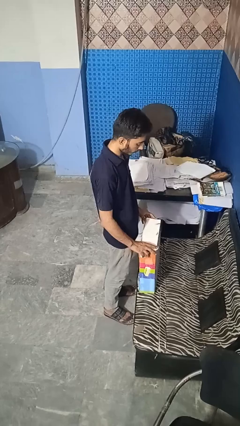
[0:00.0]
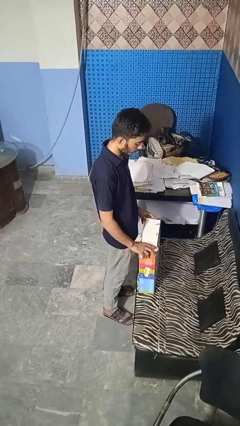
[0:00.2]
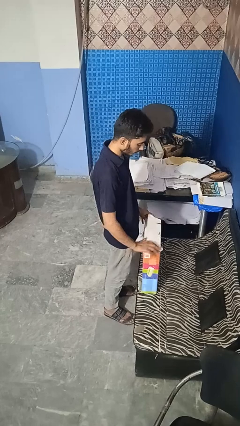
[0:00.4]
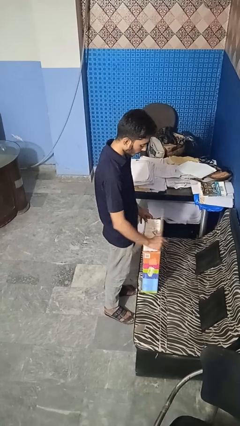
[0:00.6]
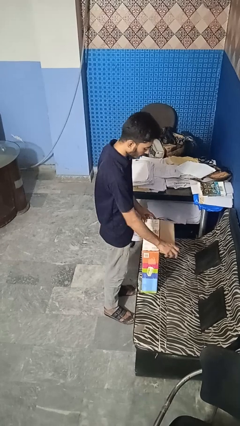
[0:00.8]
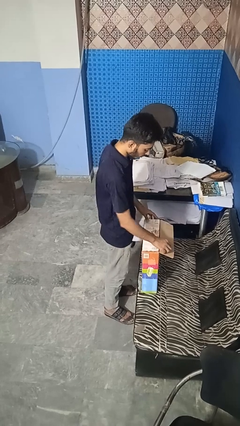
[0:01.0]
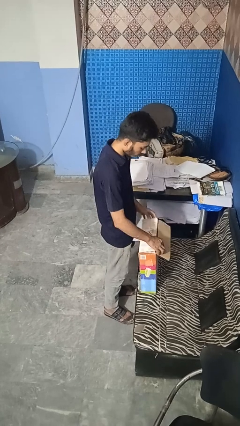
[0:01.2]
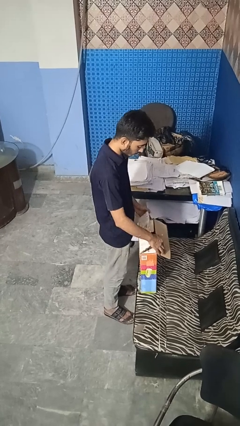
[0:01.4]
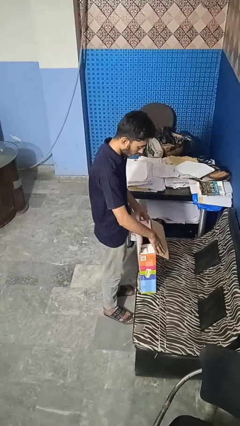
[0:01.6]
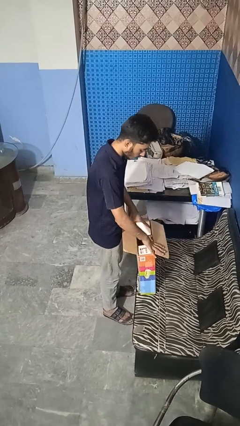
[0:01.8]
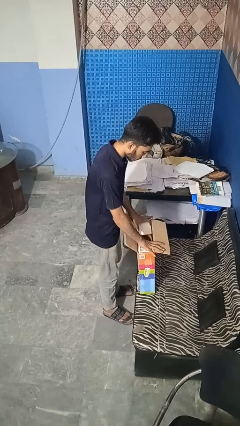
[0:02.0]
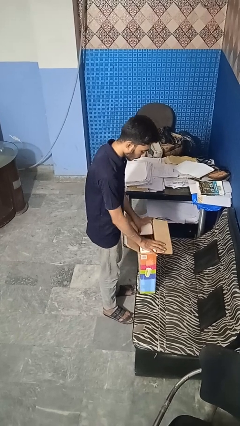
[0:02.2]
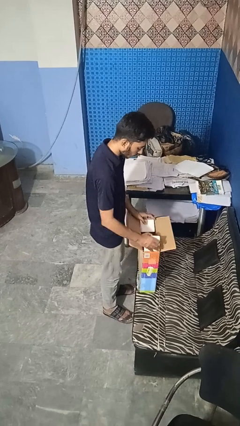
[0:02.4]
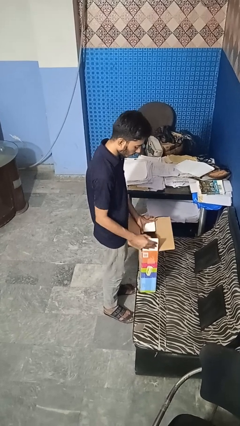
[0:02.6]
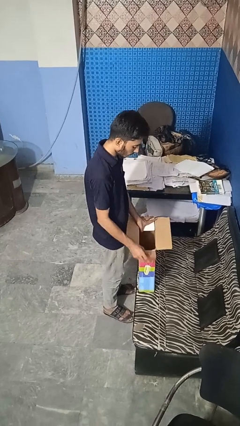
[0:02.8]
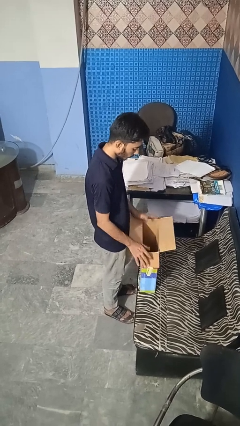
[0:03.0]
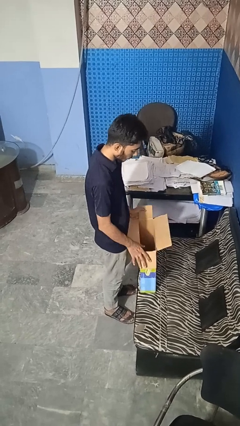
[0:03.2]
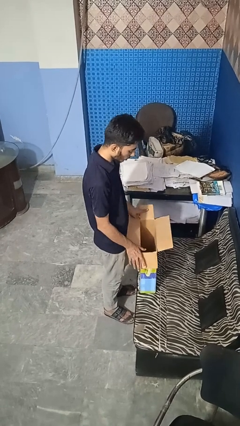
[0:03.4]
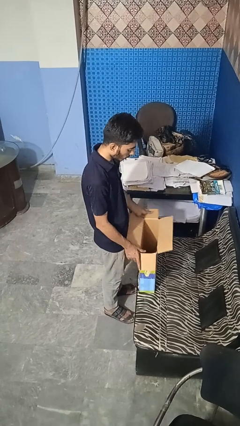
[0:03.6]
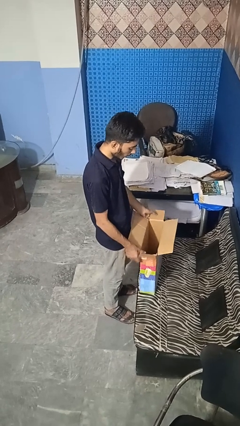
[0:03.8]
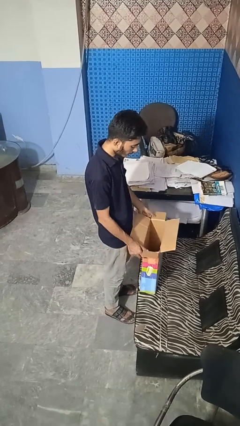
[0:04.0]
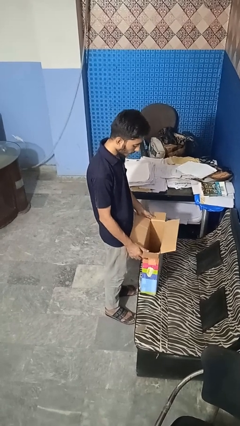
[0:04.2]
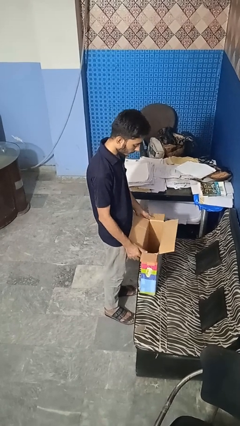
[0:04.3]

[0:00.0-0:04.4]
person opens box

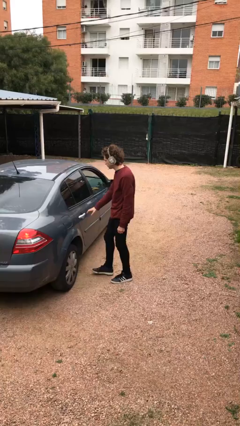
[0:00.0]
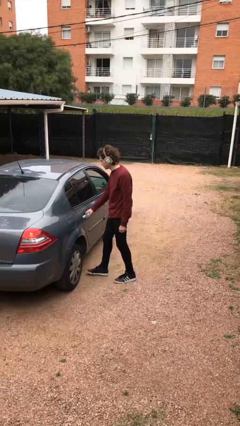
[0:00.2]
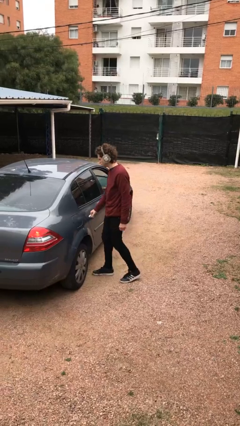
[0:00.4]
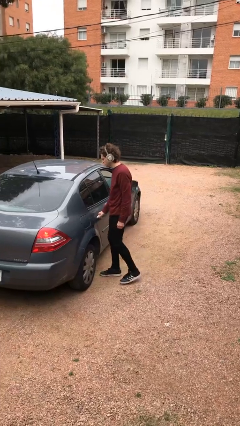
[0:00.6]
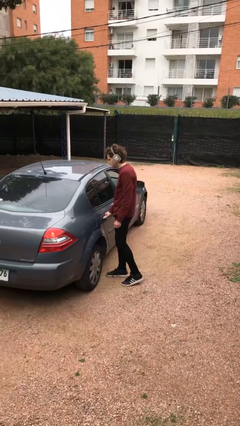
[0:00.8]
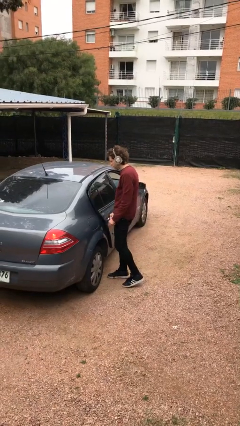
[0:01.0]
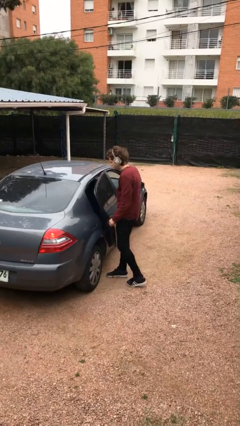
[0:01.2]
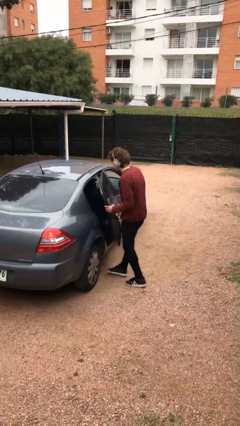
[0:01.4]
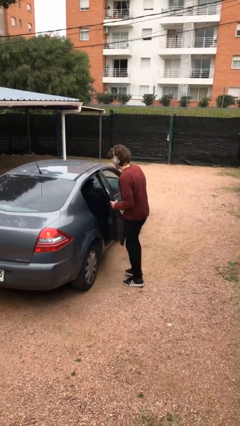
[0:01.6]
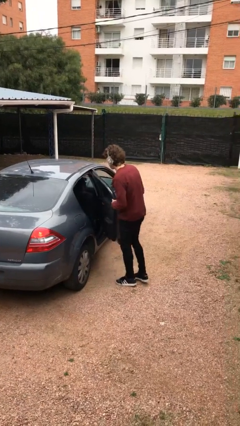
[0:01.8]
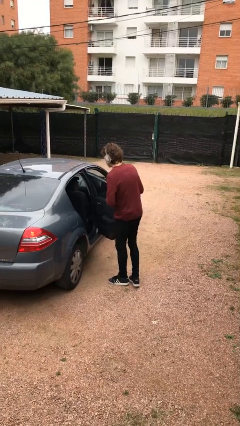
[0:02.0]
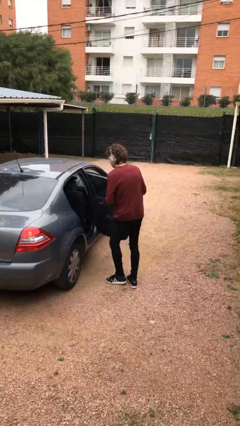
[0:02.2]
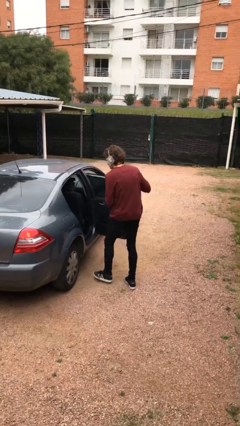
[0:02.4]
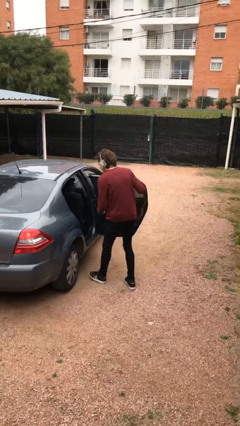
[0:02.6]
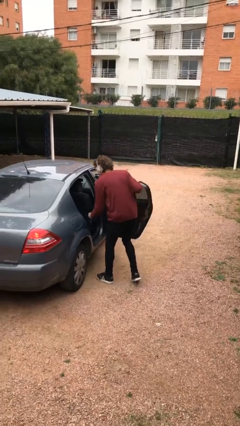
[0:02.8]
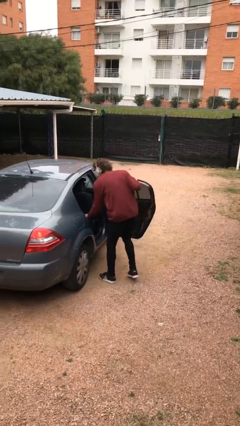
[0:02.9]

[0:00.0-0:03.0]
person opens car door

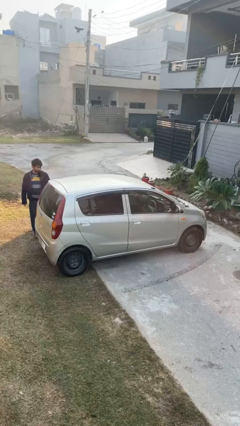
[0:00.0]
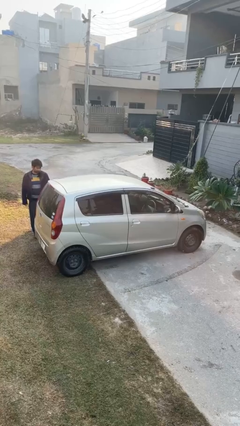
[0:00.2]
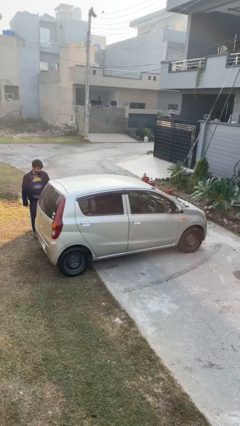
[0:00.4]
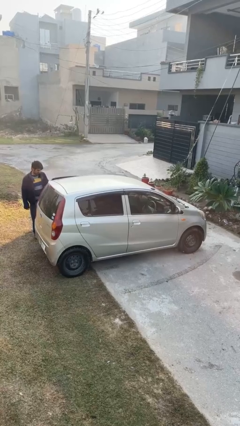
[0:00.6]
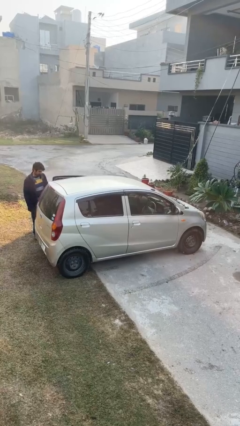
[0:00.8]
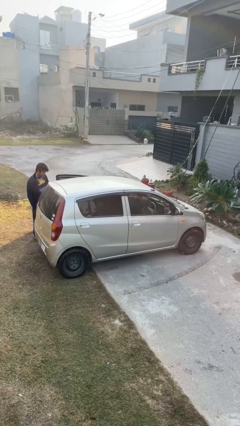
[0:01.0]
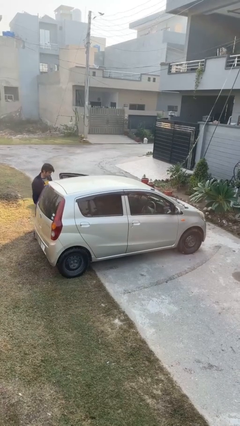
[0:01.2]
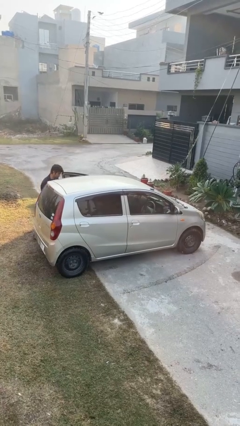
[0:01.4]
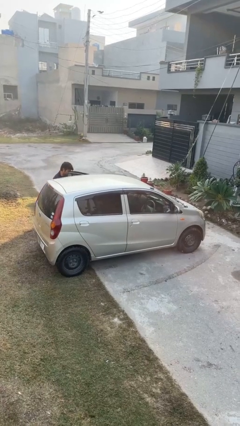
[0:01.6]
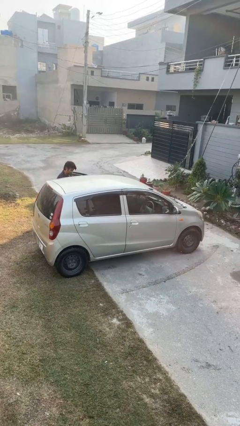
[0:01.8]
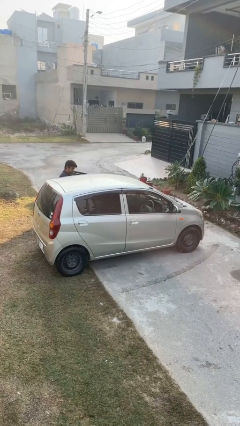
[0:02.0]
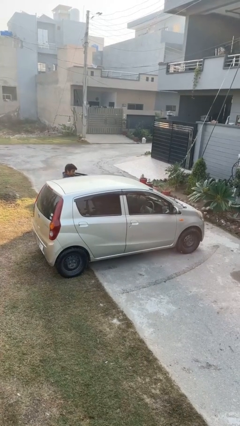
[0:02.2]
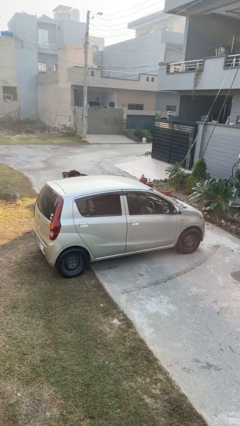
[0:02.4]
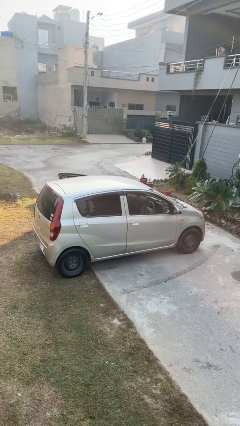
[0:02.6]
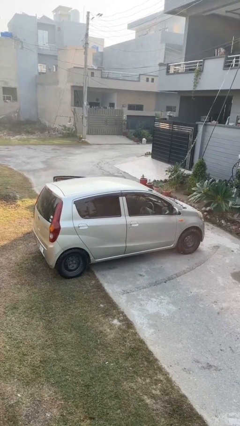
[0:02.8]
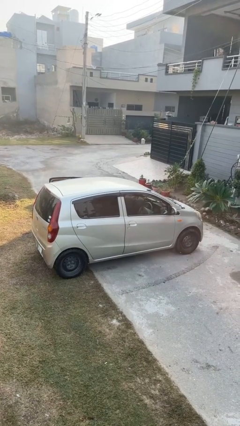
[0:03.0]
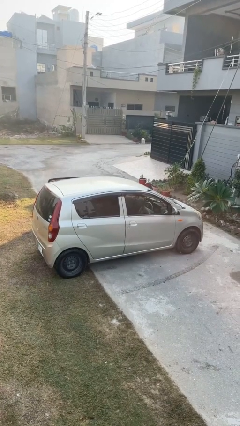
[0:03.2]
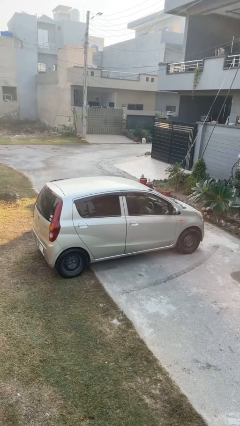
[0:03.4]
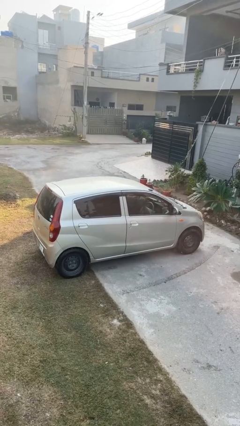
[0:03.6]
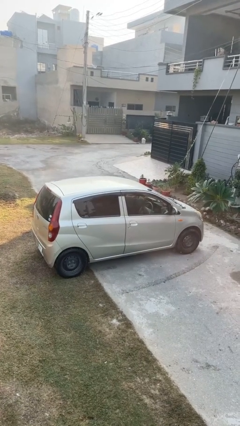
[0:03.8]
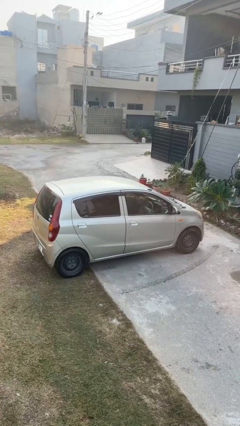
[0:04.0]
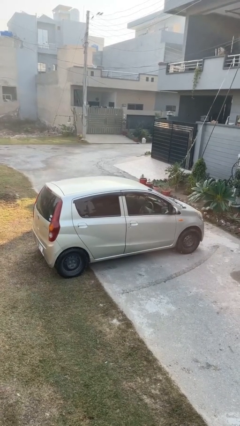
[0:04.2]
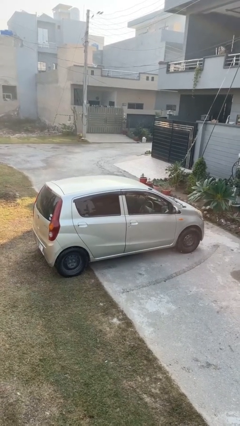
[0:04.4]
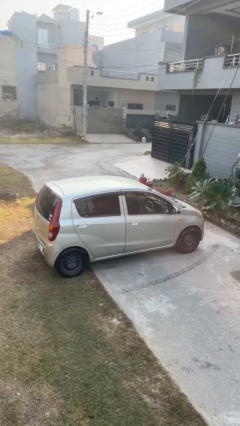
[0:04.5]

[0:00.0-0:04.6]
car picks up person

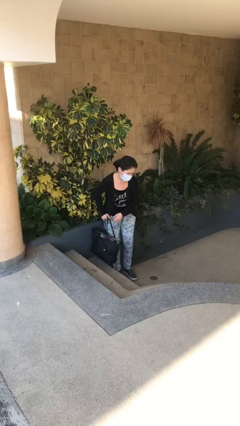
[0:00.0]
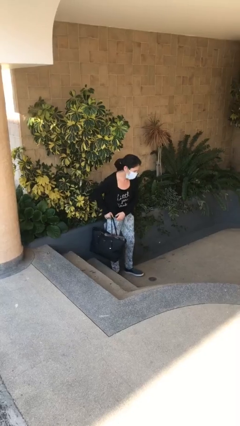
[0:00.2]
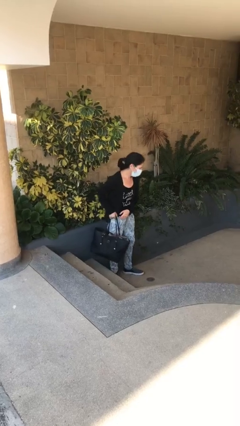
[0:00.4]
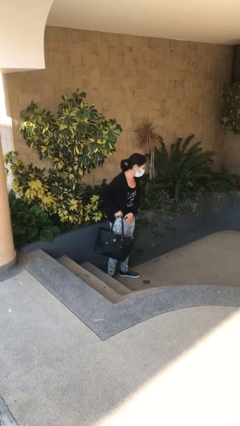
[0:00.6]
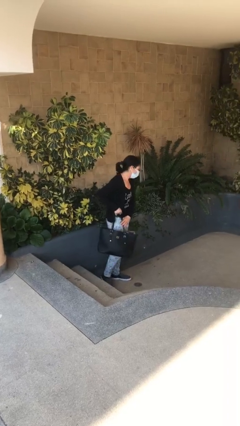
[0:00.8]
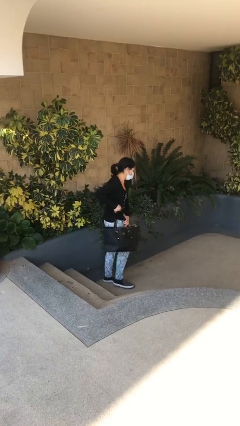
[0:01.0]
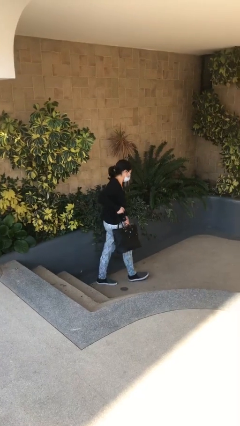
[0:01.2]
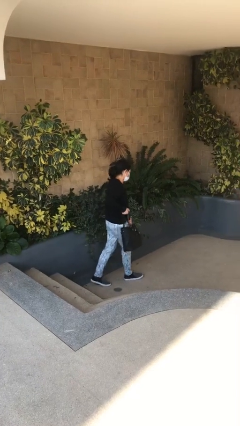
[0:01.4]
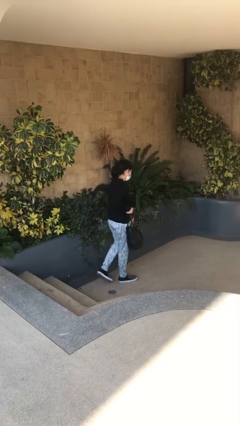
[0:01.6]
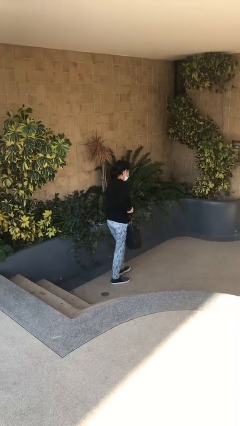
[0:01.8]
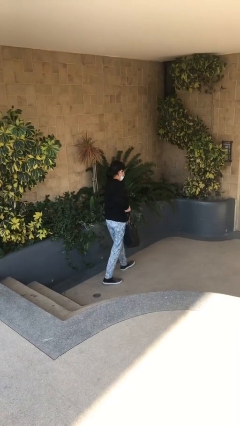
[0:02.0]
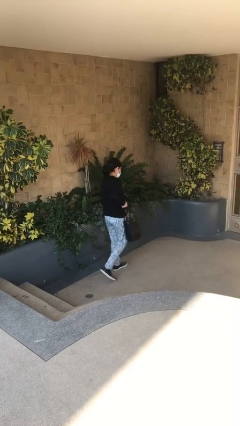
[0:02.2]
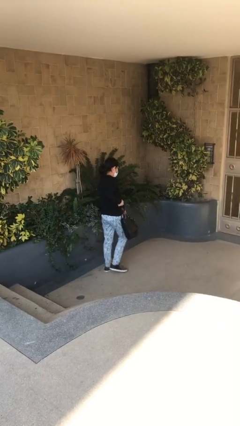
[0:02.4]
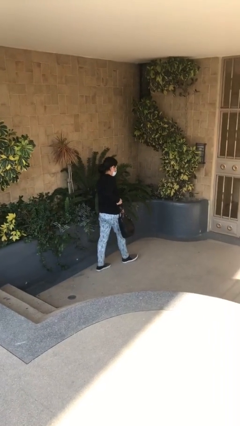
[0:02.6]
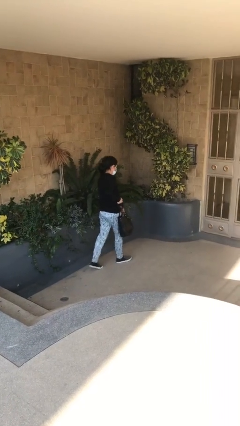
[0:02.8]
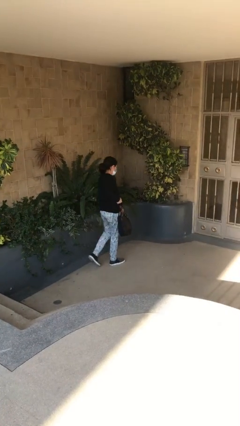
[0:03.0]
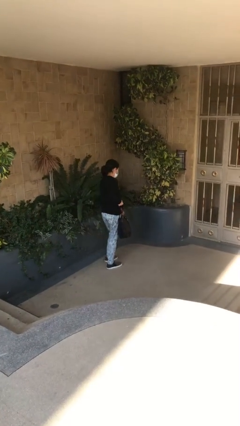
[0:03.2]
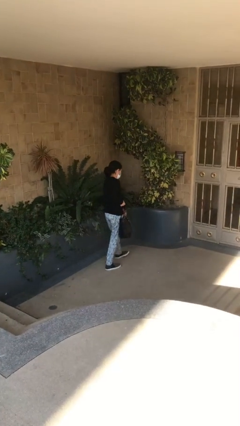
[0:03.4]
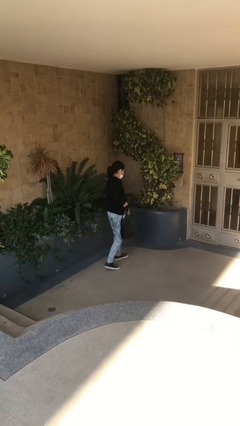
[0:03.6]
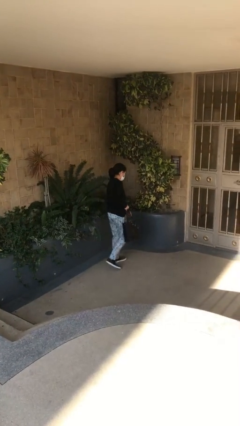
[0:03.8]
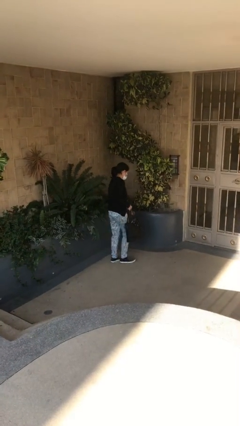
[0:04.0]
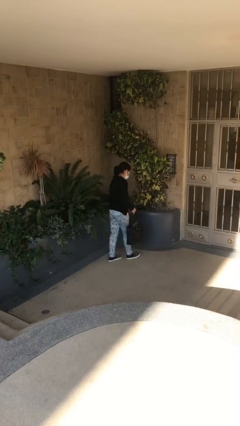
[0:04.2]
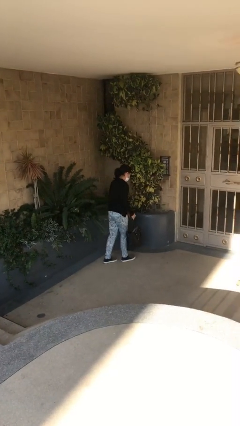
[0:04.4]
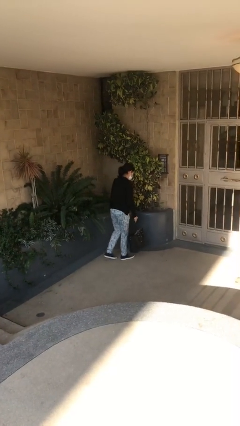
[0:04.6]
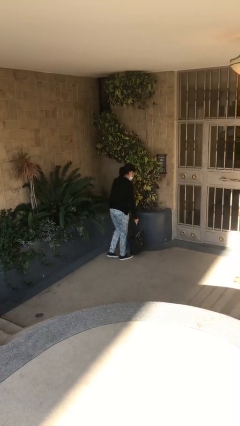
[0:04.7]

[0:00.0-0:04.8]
person carries heavy object

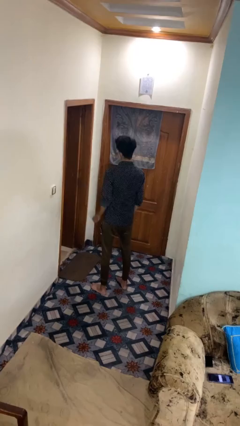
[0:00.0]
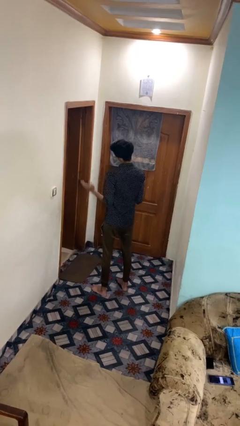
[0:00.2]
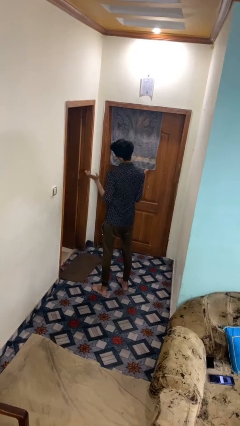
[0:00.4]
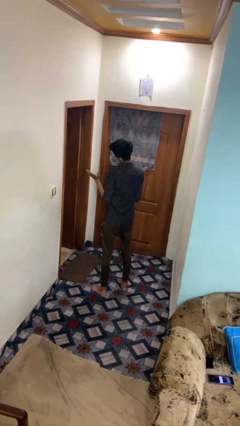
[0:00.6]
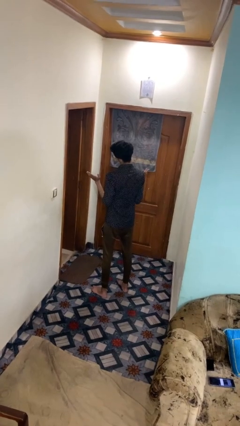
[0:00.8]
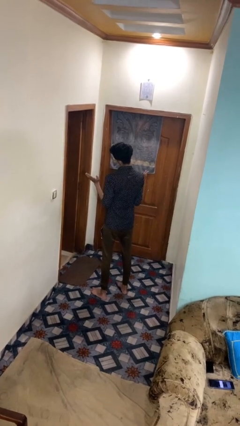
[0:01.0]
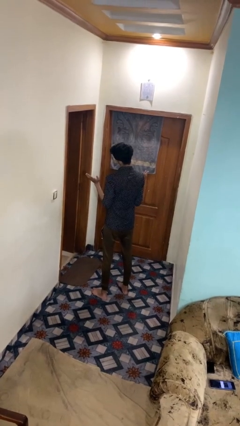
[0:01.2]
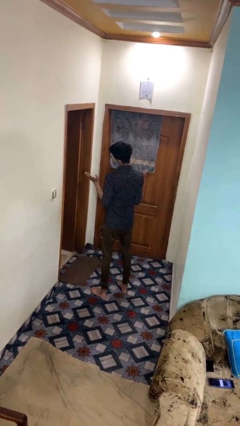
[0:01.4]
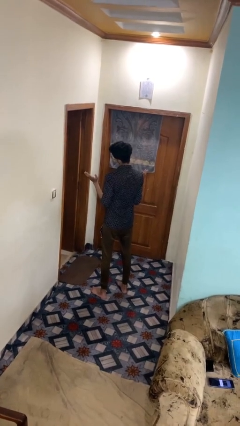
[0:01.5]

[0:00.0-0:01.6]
person shrugs
